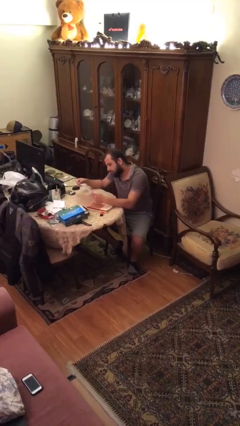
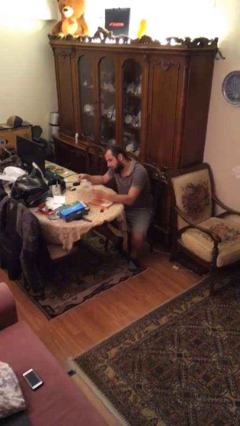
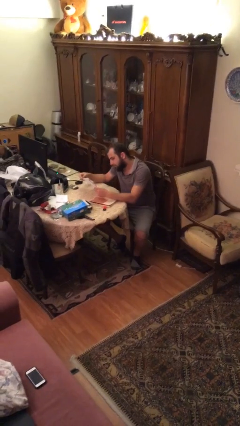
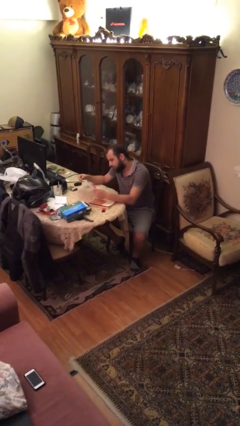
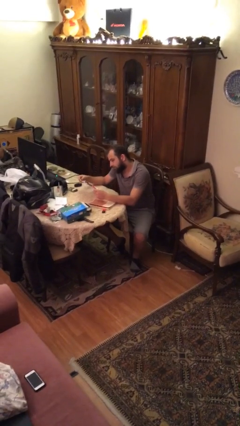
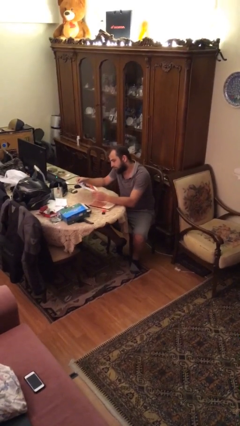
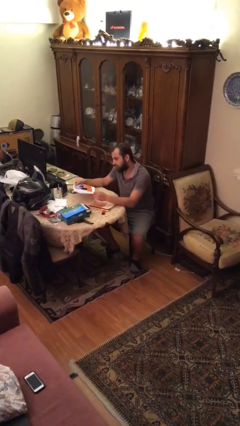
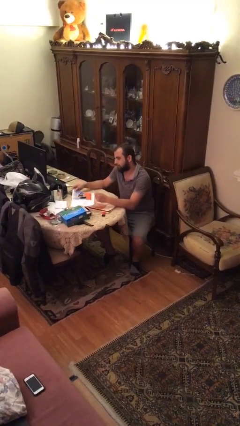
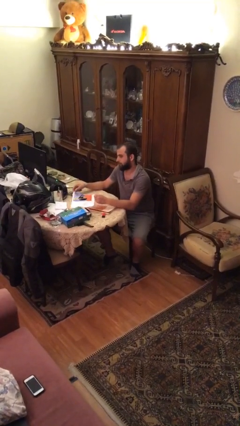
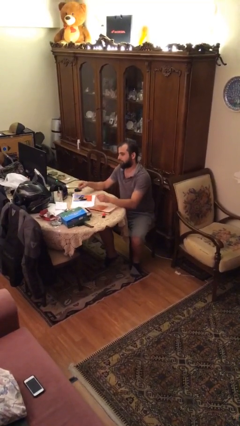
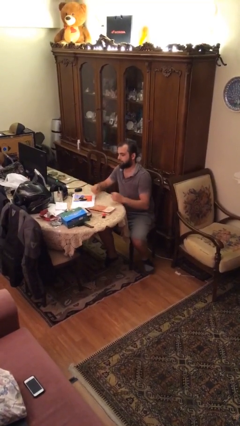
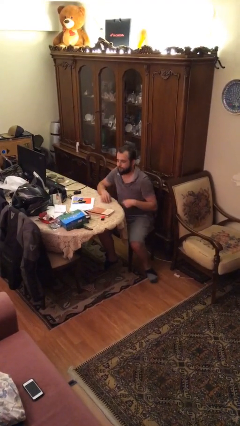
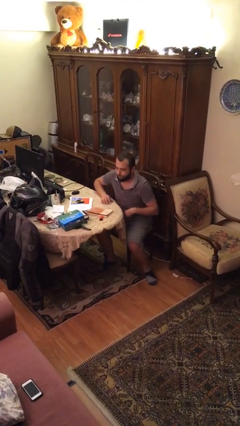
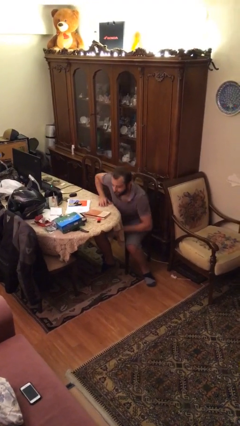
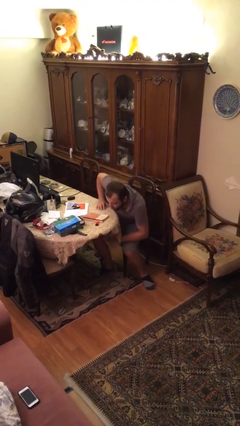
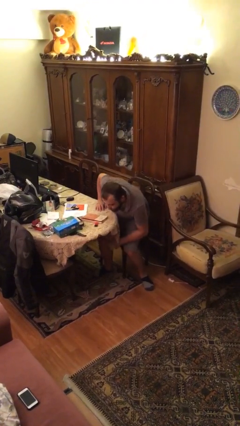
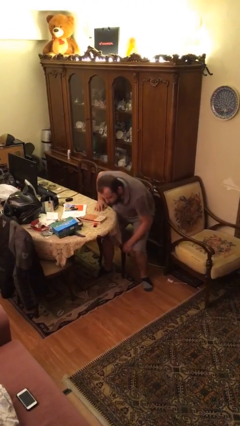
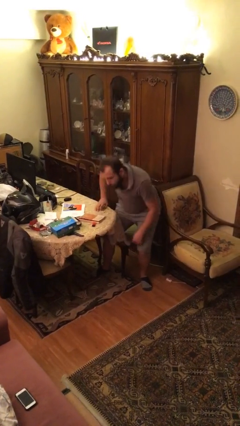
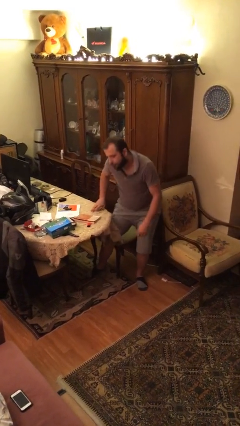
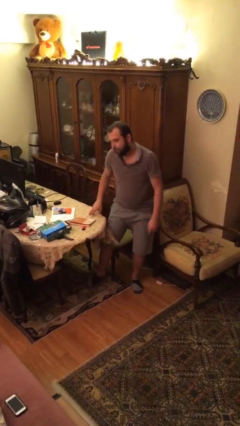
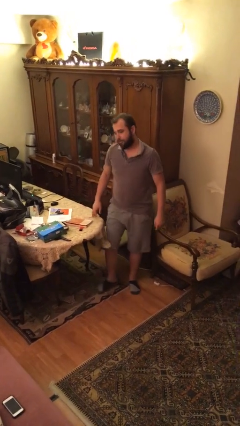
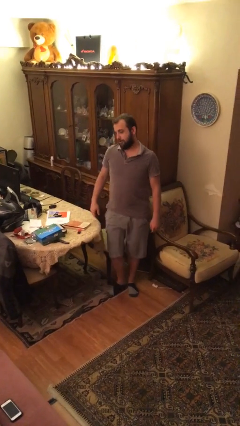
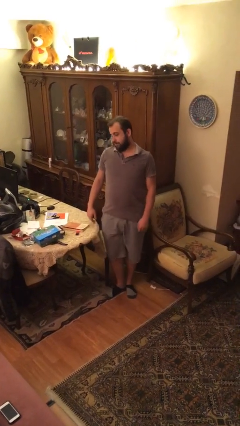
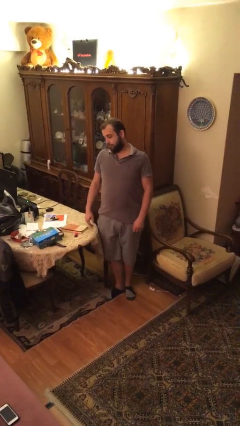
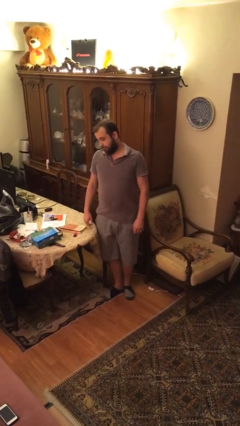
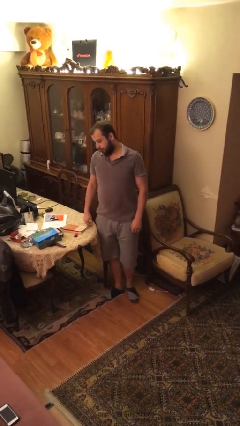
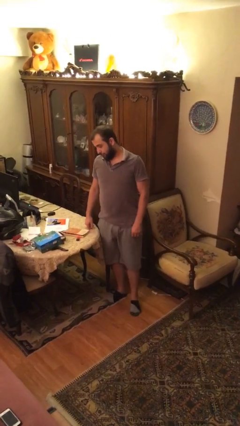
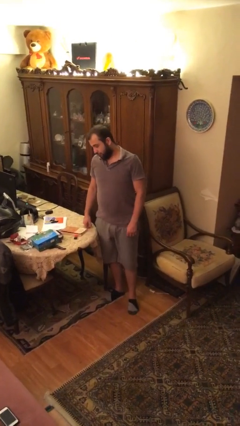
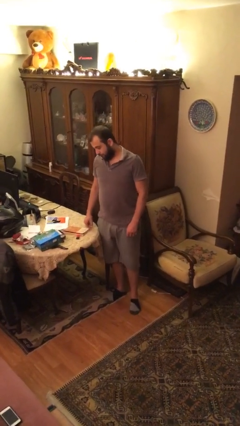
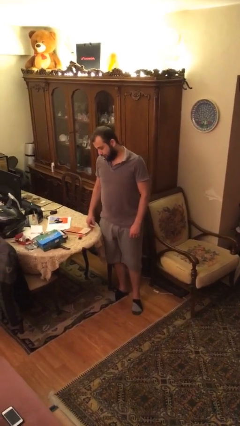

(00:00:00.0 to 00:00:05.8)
person stands up

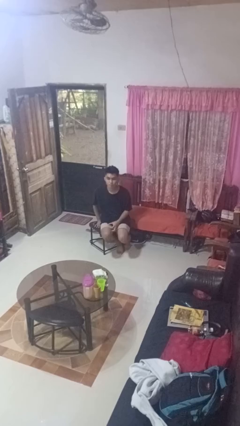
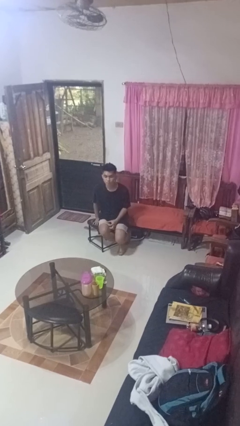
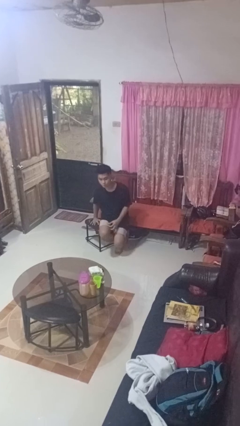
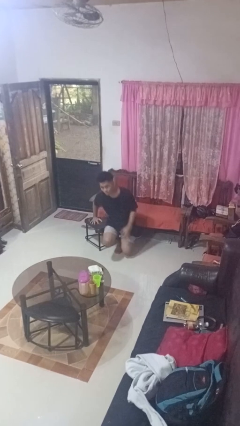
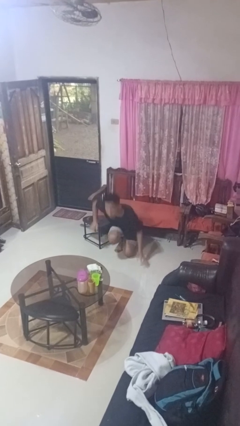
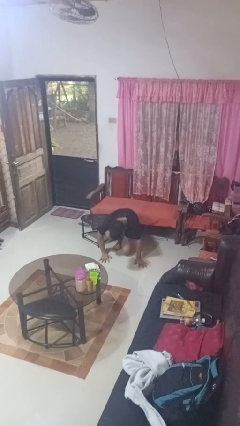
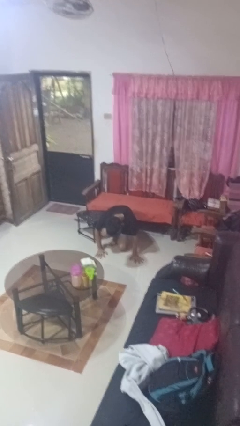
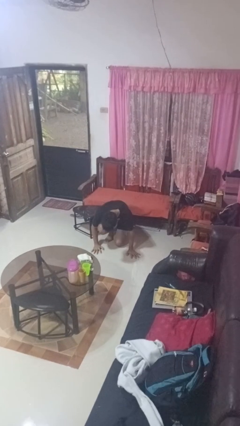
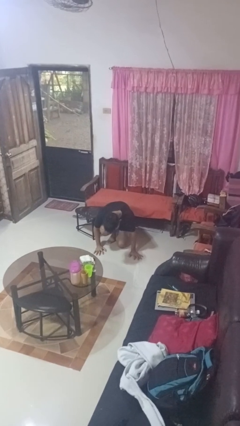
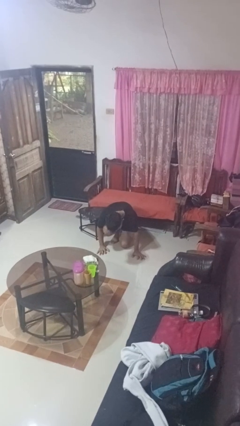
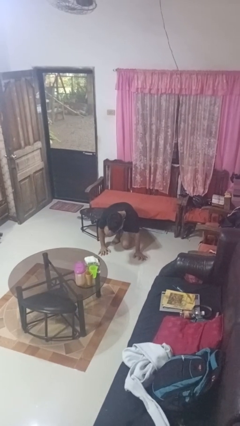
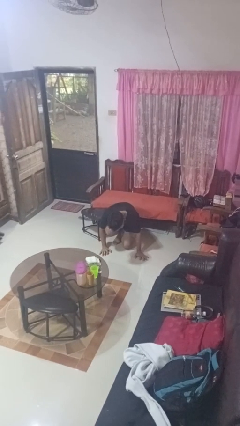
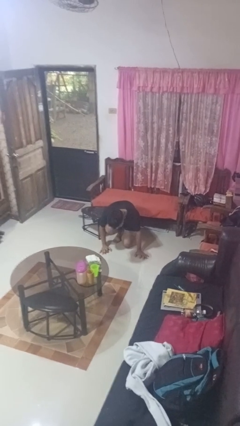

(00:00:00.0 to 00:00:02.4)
person falls from chair

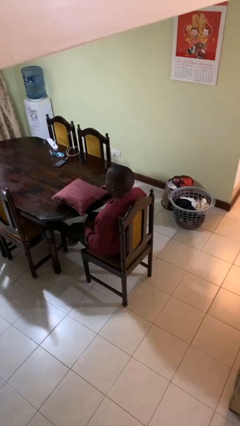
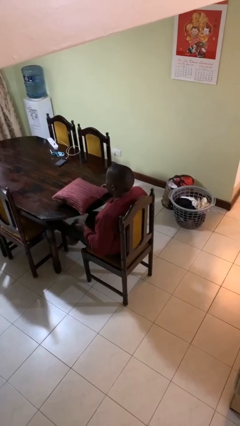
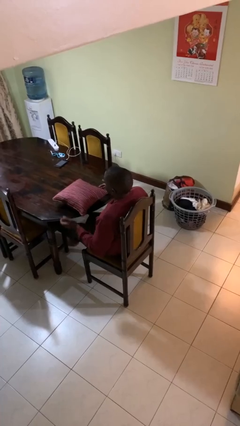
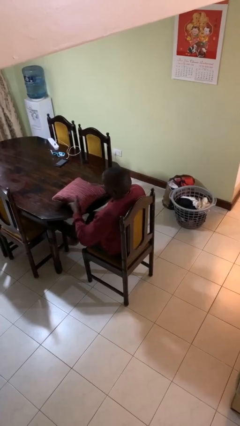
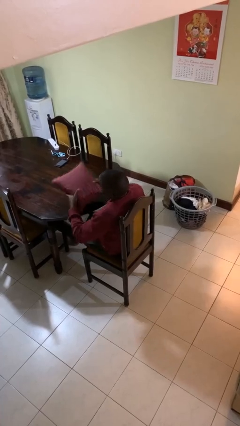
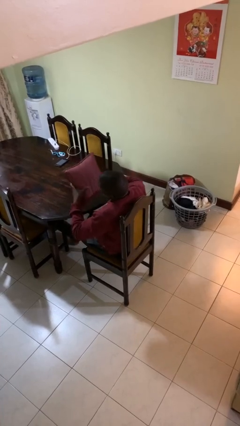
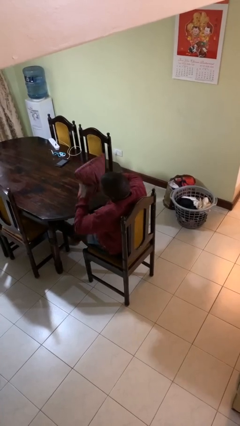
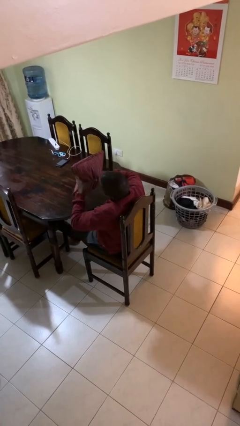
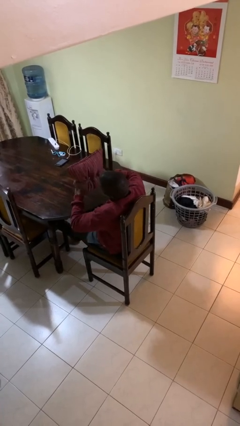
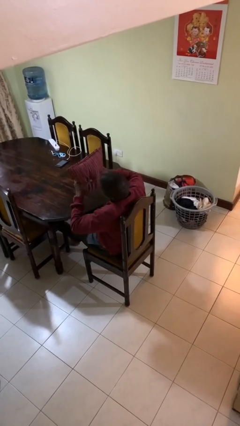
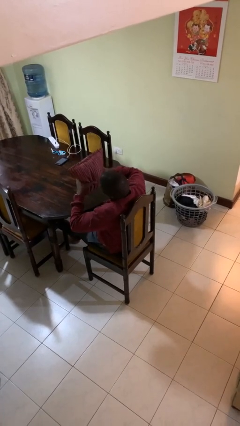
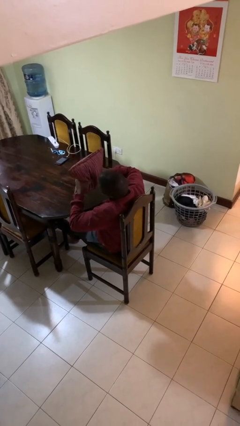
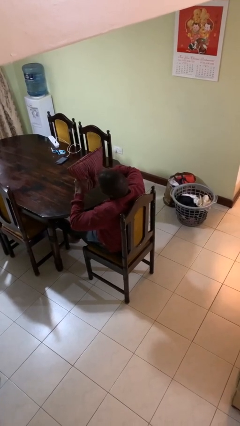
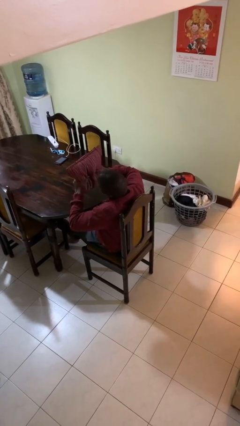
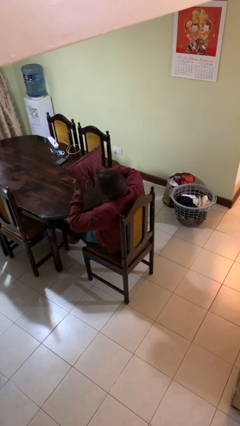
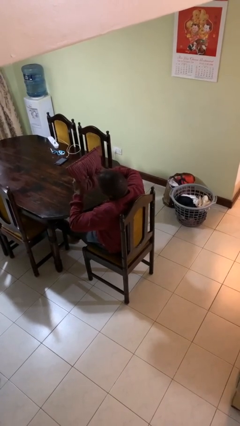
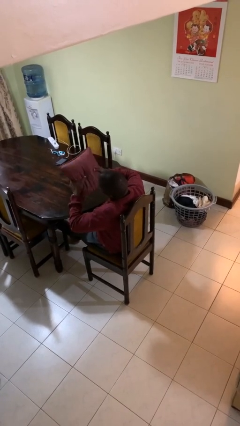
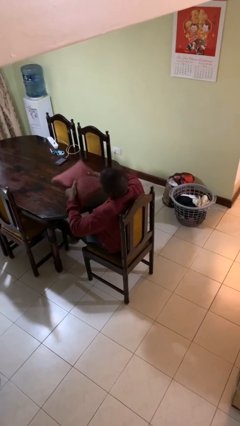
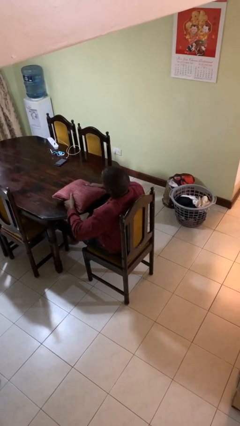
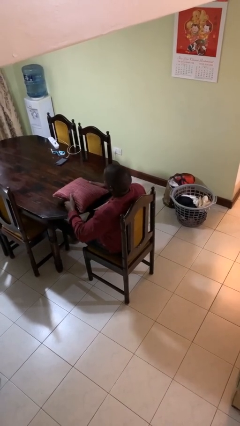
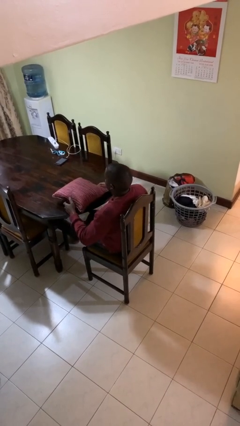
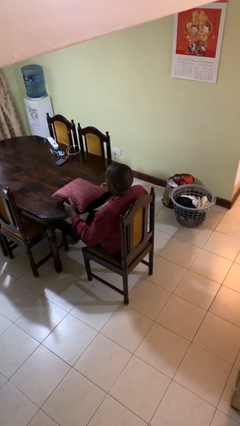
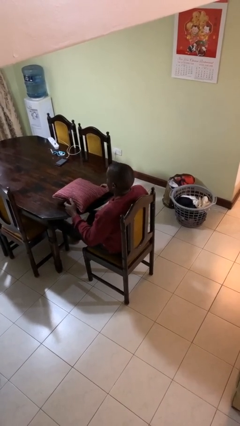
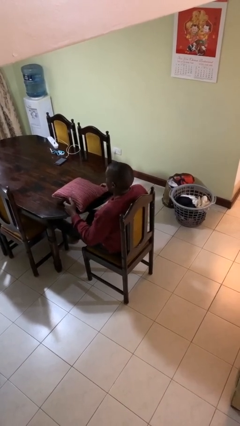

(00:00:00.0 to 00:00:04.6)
person squeezes object

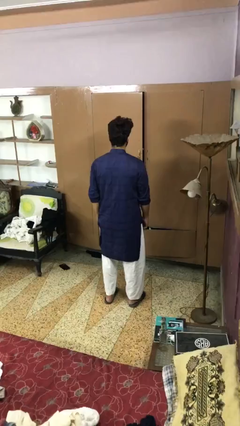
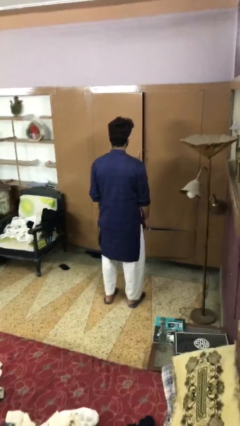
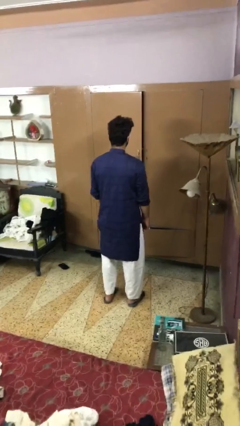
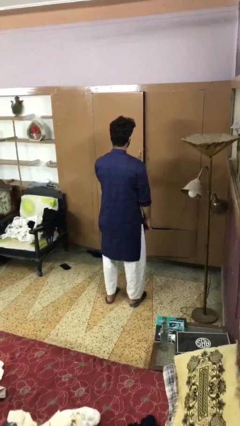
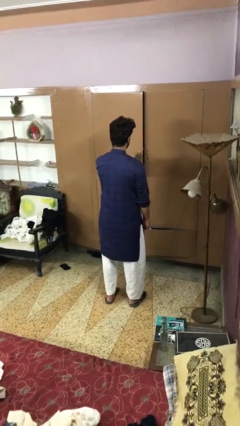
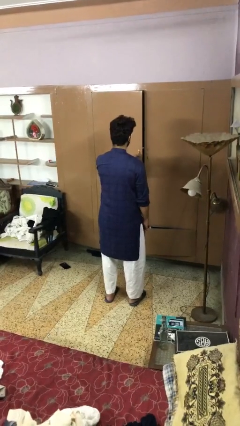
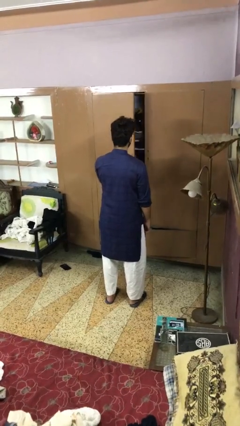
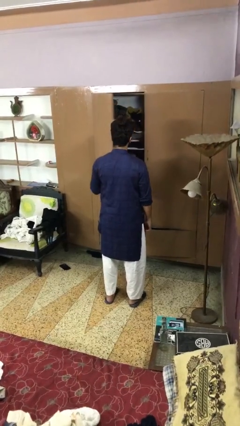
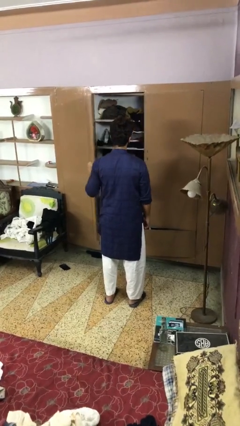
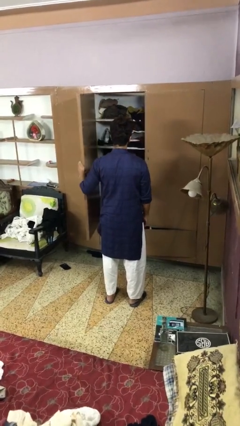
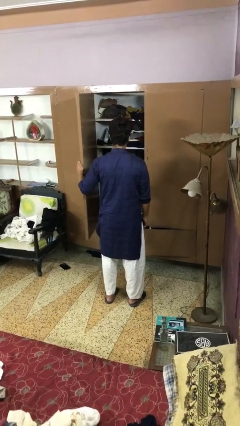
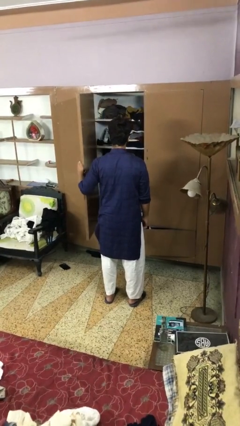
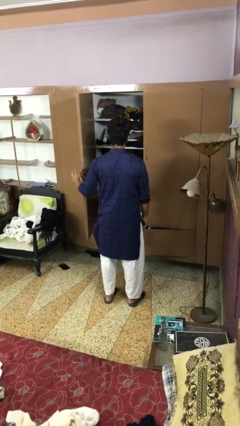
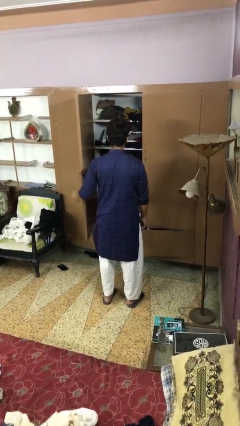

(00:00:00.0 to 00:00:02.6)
person opens closet door

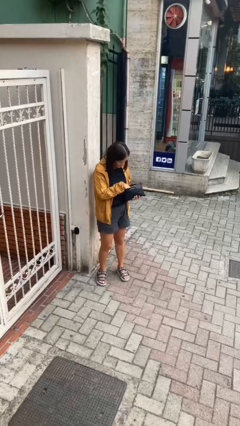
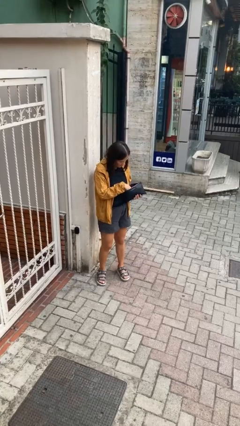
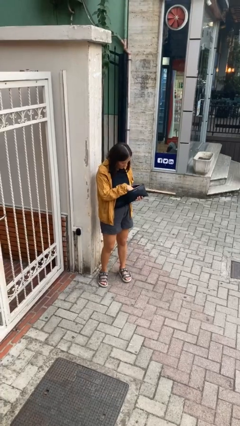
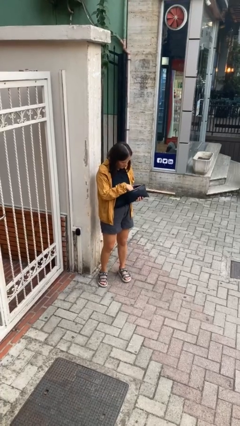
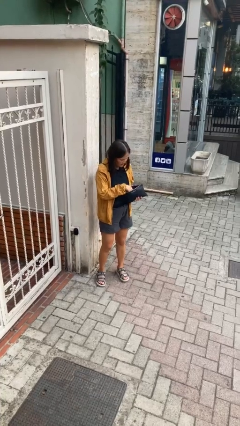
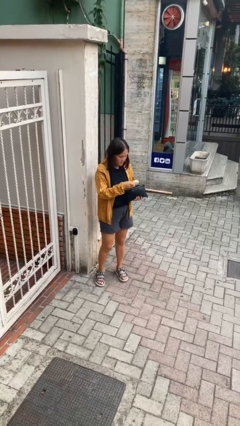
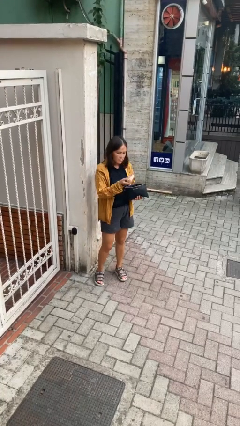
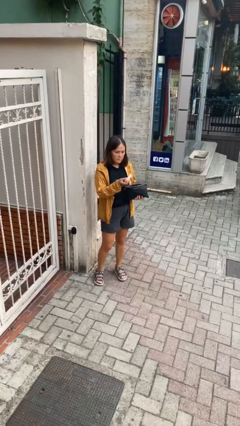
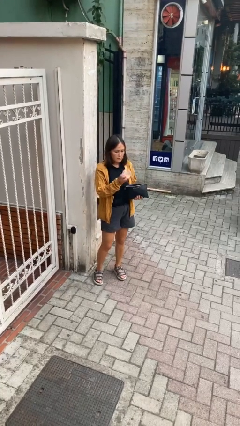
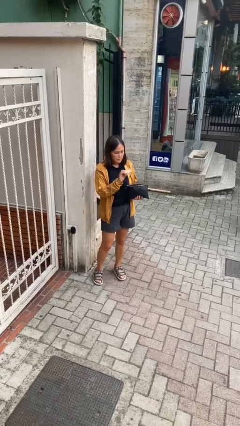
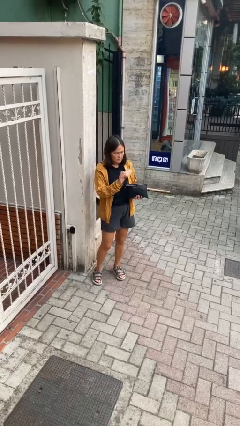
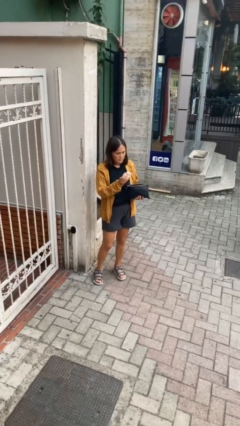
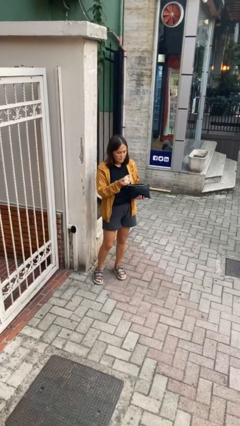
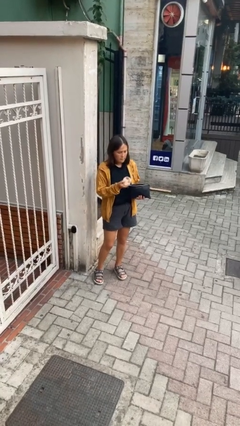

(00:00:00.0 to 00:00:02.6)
person takes object from purse
